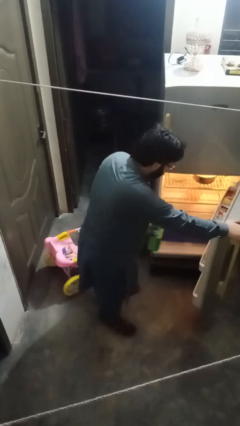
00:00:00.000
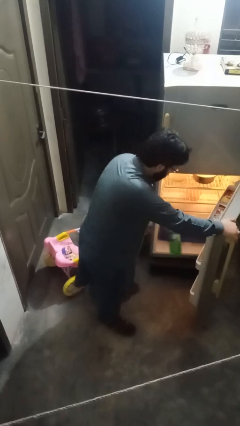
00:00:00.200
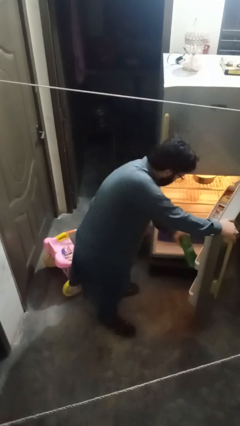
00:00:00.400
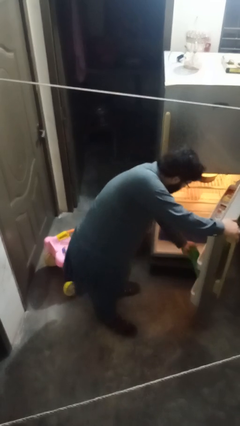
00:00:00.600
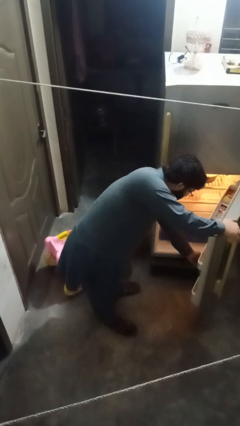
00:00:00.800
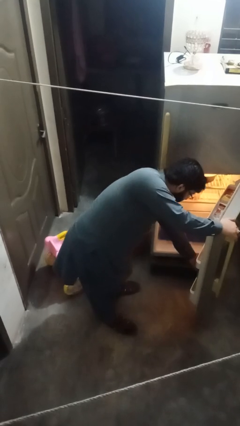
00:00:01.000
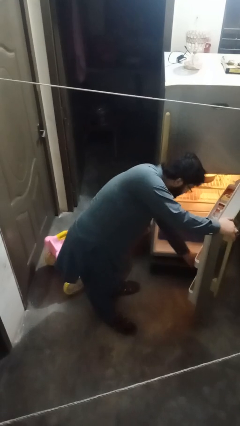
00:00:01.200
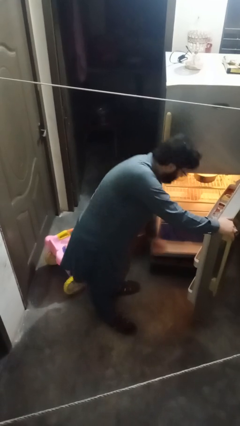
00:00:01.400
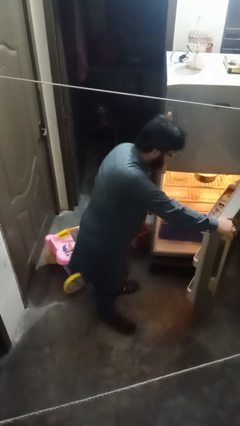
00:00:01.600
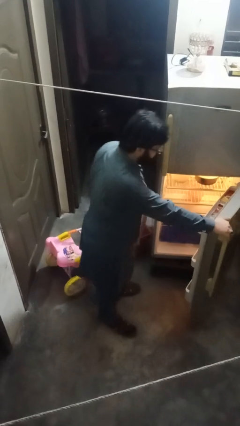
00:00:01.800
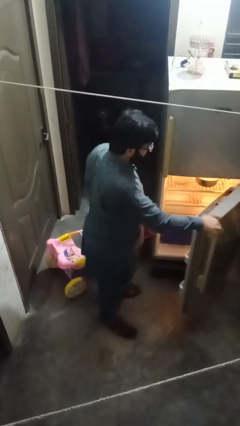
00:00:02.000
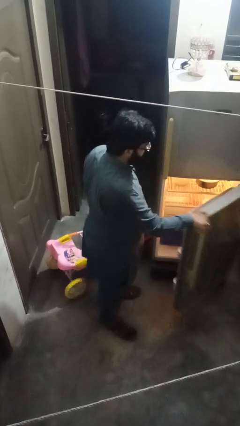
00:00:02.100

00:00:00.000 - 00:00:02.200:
person puts object into refrigerator

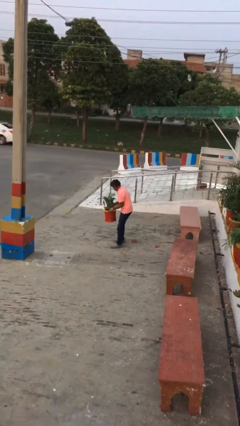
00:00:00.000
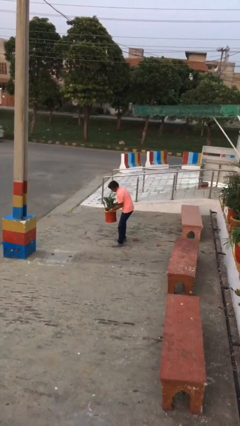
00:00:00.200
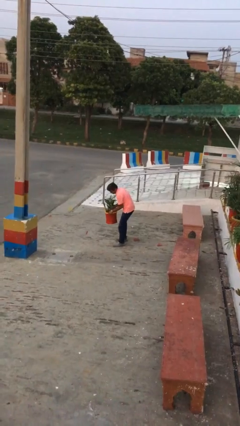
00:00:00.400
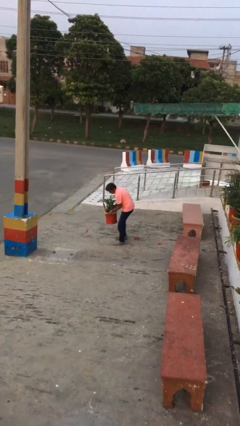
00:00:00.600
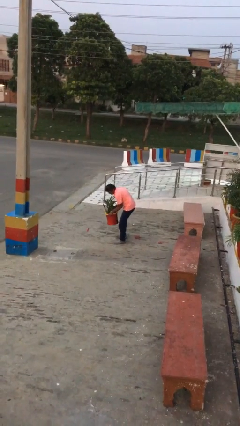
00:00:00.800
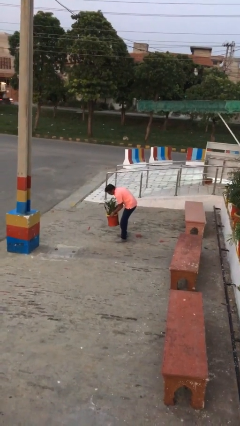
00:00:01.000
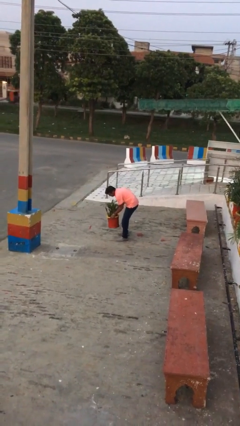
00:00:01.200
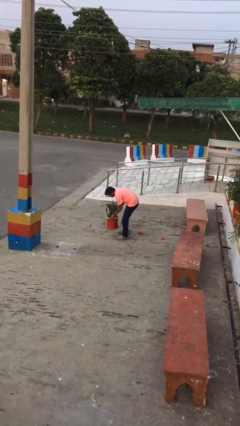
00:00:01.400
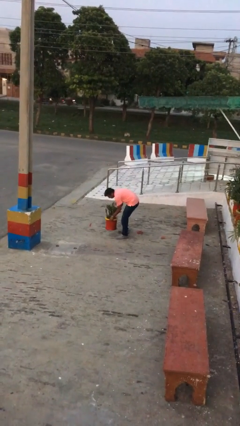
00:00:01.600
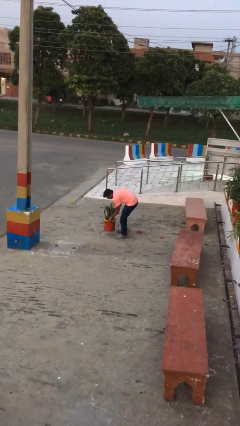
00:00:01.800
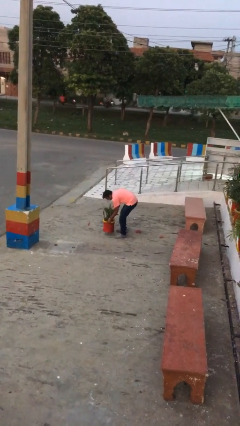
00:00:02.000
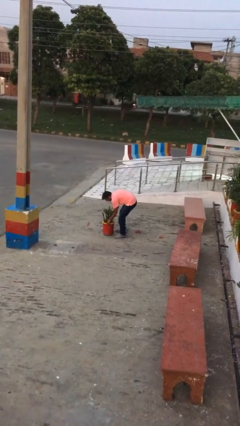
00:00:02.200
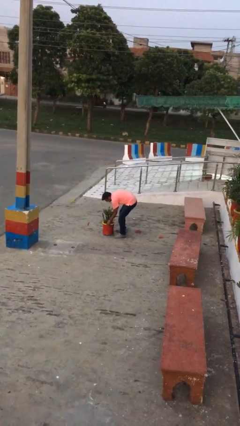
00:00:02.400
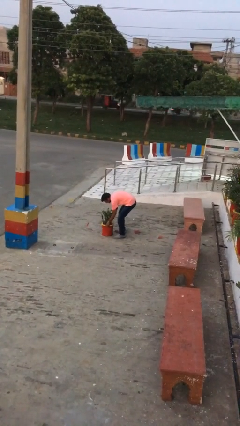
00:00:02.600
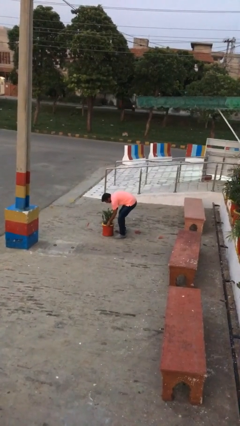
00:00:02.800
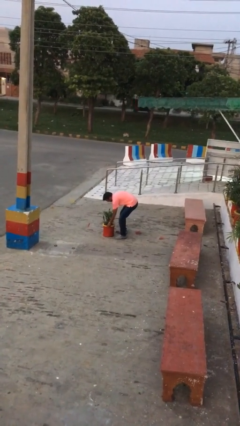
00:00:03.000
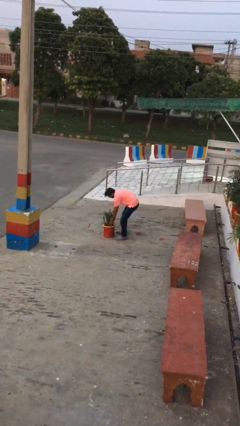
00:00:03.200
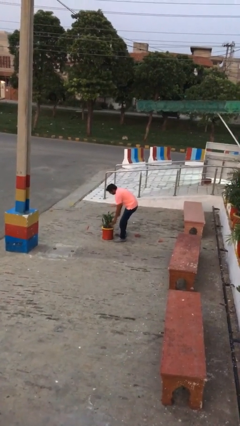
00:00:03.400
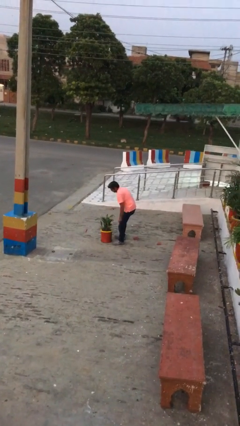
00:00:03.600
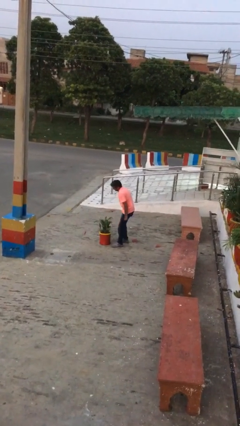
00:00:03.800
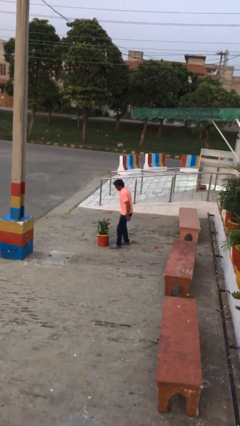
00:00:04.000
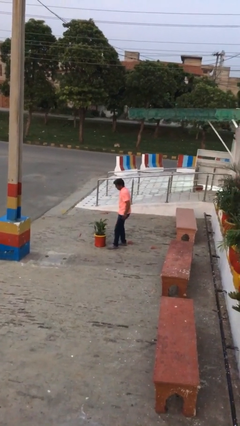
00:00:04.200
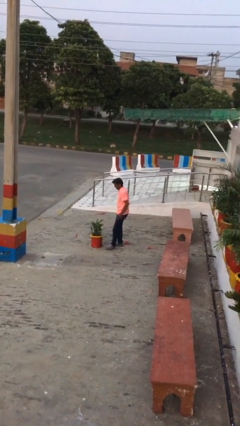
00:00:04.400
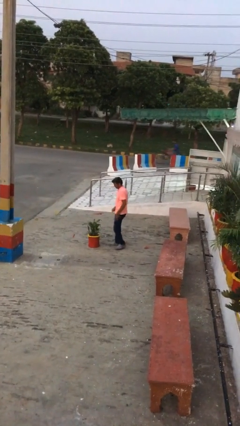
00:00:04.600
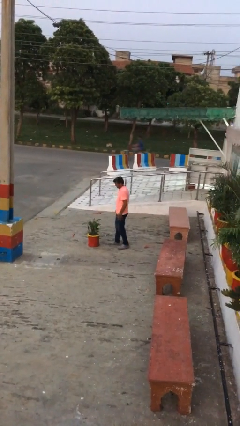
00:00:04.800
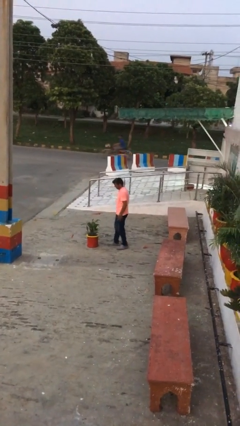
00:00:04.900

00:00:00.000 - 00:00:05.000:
person puts down object on floor

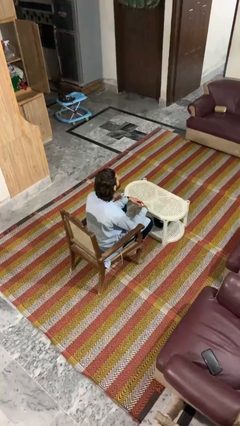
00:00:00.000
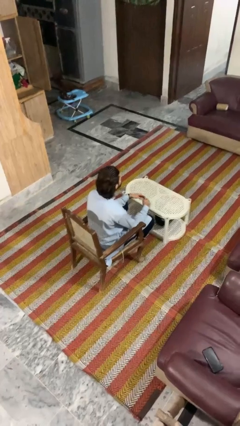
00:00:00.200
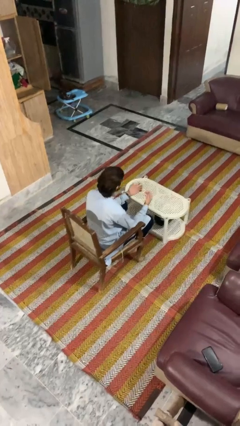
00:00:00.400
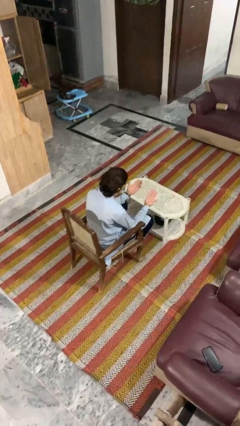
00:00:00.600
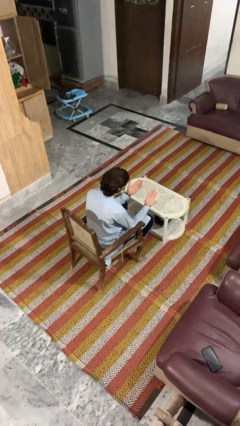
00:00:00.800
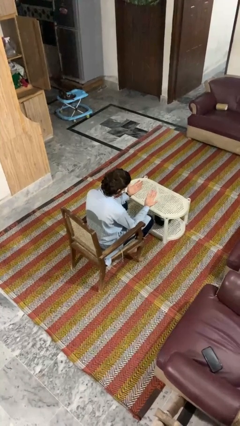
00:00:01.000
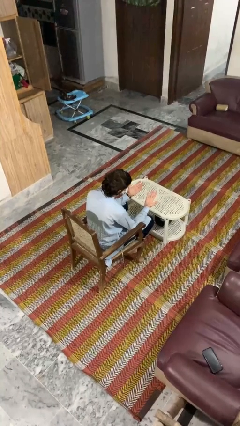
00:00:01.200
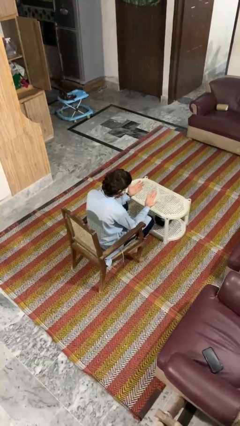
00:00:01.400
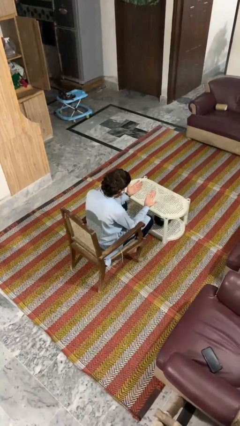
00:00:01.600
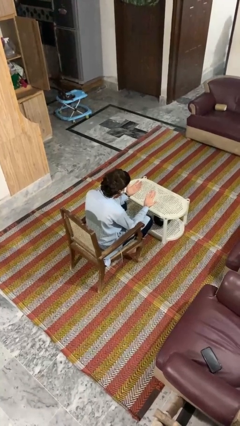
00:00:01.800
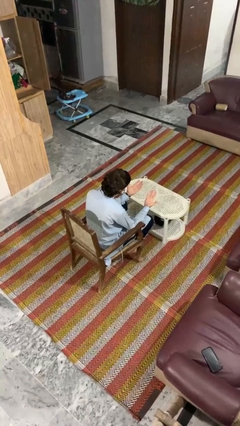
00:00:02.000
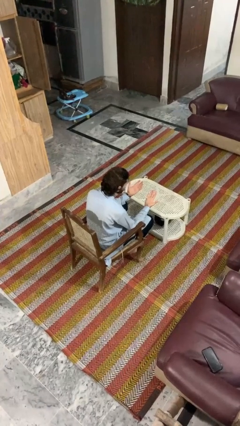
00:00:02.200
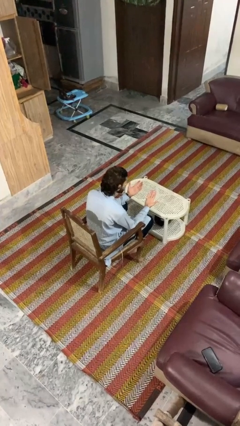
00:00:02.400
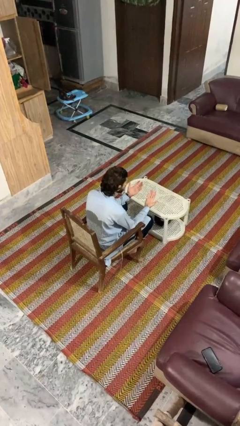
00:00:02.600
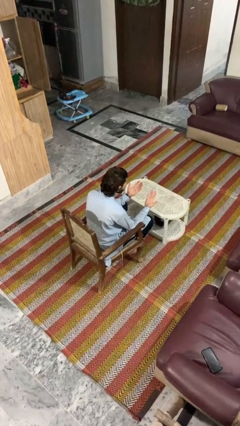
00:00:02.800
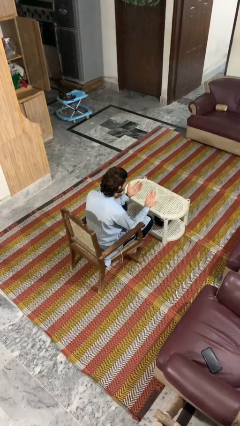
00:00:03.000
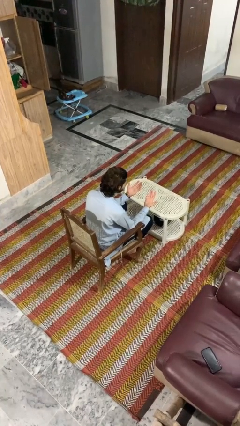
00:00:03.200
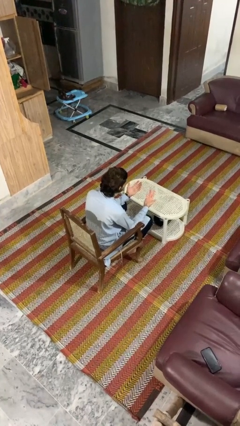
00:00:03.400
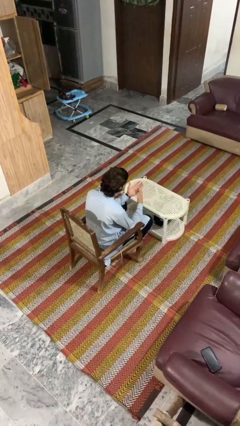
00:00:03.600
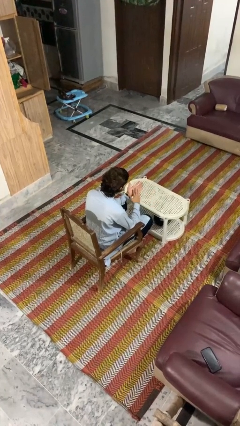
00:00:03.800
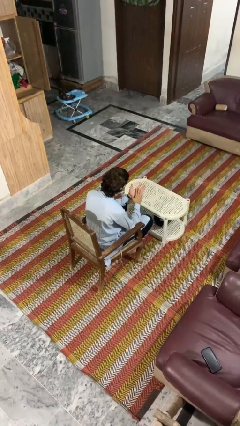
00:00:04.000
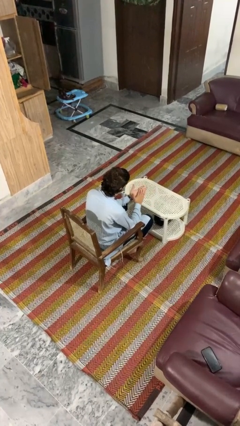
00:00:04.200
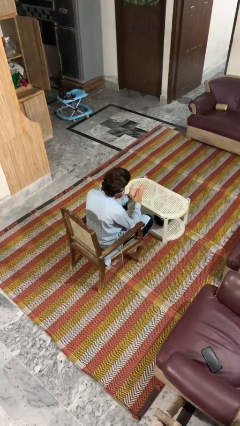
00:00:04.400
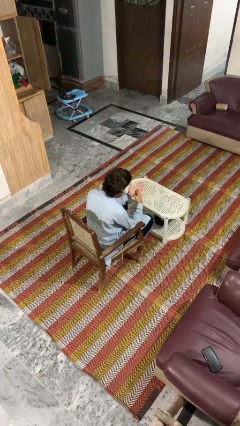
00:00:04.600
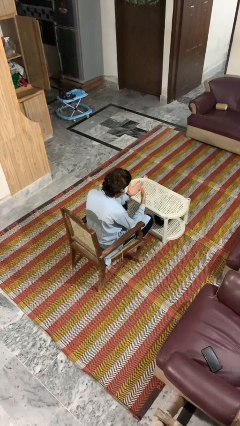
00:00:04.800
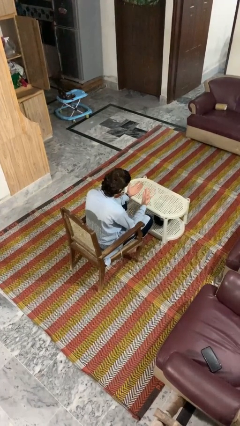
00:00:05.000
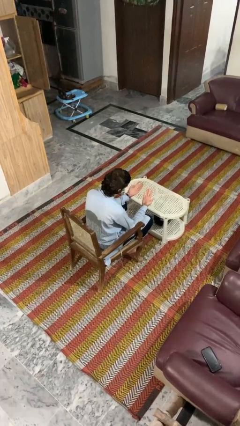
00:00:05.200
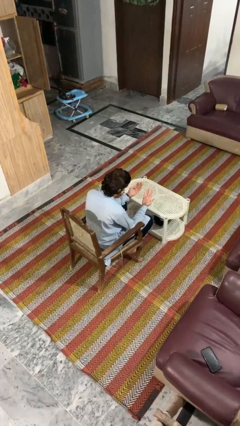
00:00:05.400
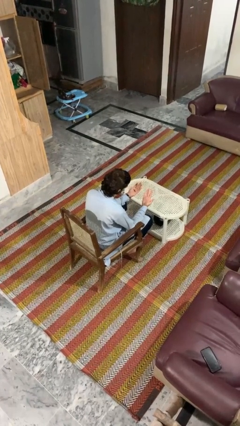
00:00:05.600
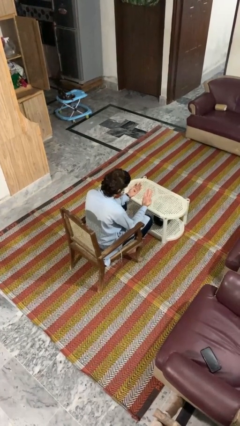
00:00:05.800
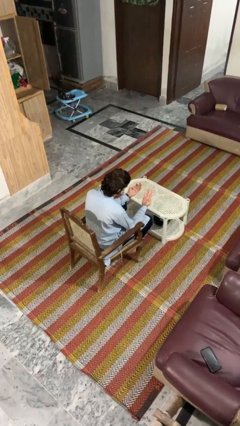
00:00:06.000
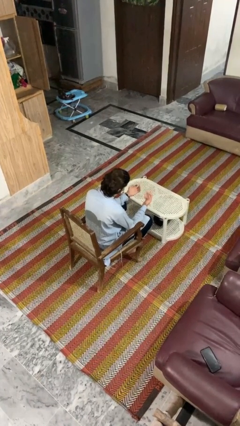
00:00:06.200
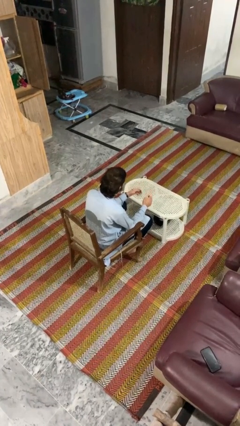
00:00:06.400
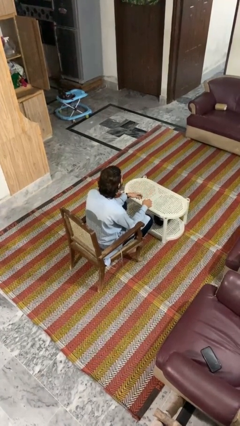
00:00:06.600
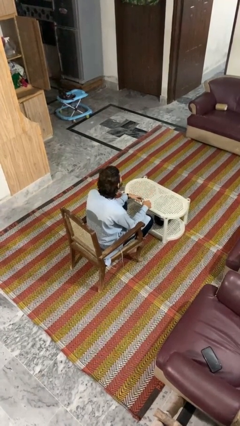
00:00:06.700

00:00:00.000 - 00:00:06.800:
person looks at hands in lap

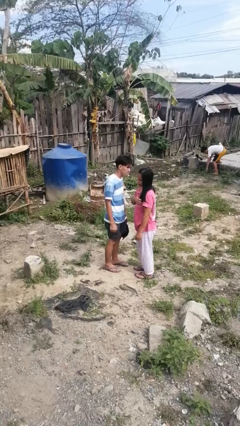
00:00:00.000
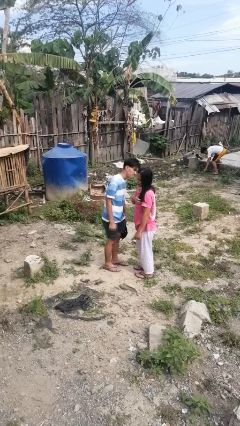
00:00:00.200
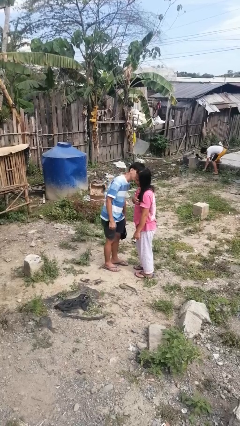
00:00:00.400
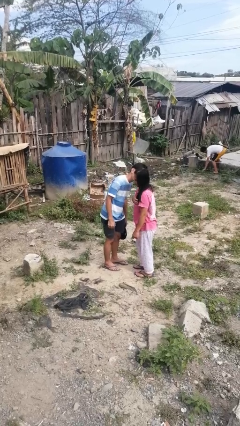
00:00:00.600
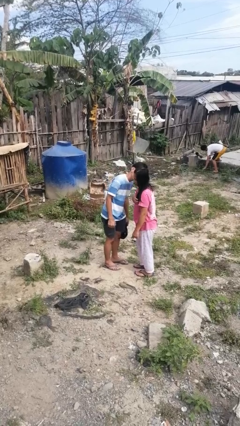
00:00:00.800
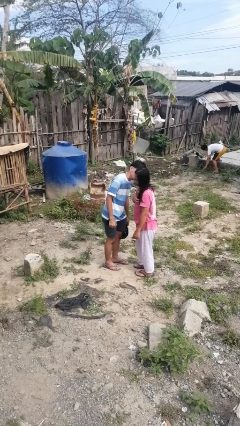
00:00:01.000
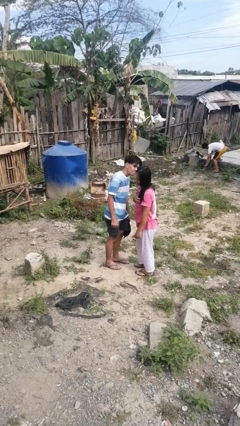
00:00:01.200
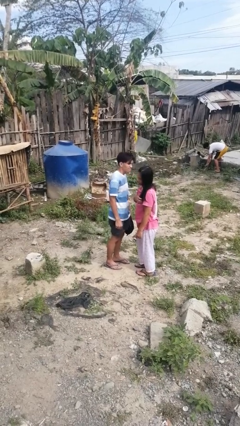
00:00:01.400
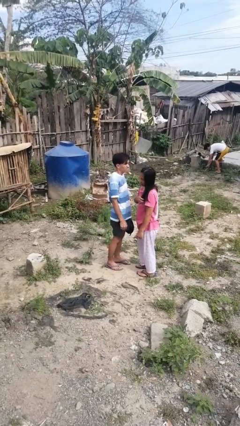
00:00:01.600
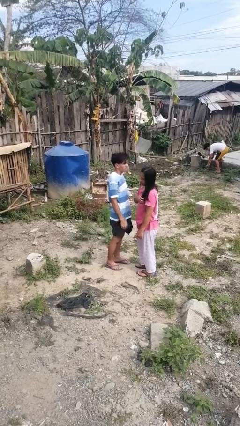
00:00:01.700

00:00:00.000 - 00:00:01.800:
person kisses cheek of person

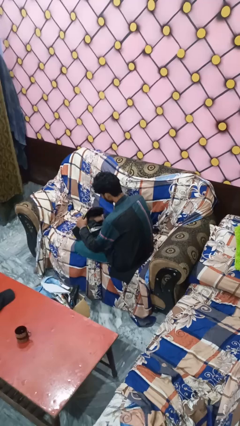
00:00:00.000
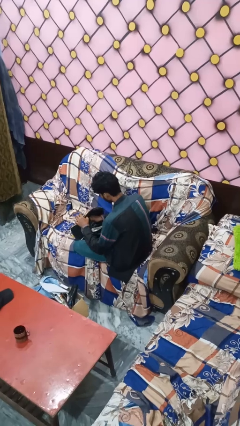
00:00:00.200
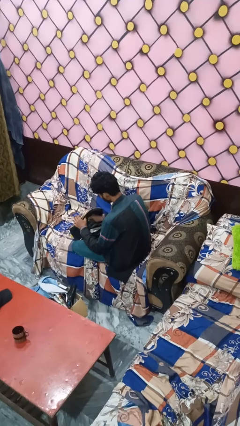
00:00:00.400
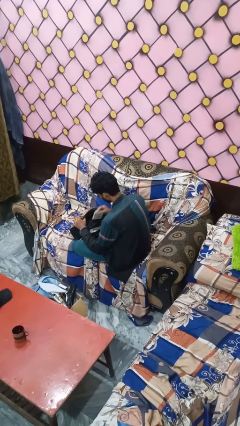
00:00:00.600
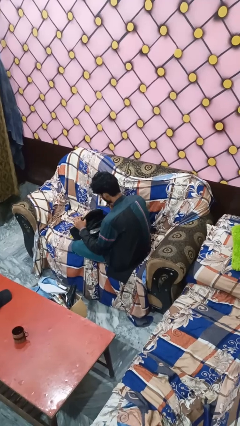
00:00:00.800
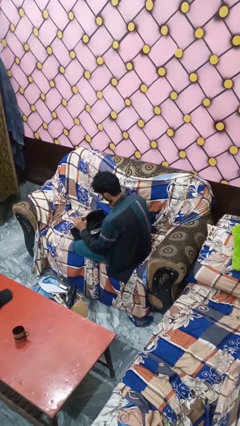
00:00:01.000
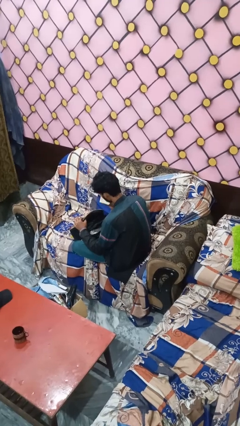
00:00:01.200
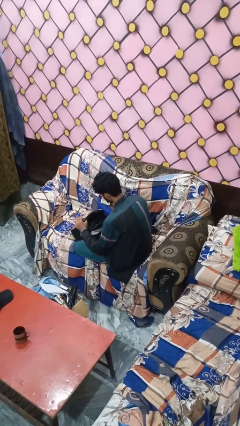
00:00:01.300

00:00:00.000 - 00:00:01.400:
person searches in bag

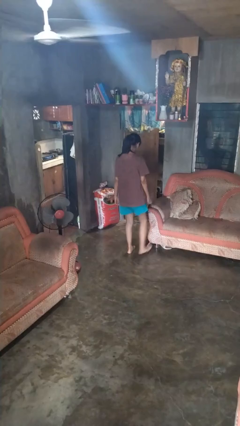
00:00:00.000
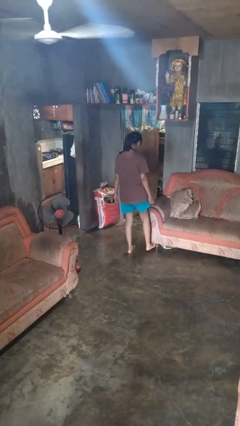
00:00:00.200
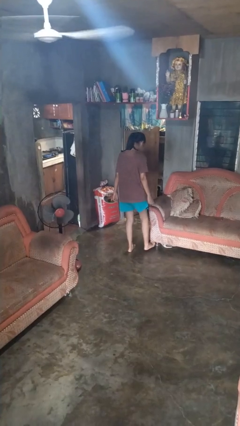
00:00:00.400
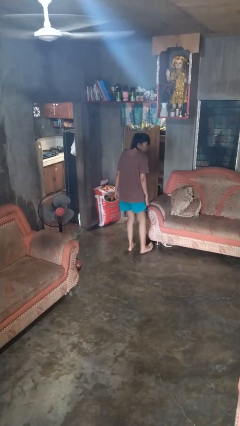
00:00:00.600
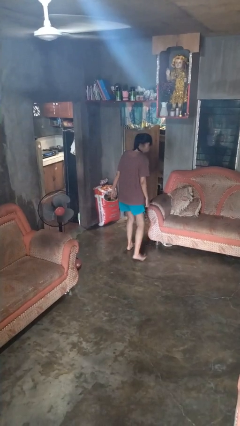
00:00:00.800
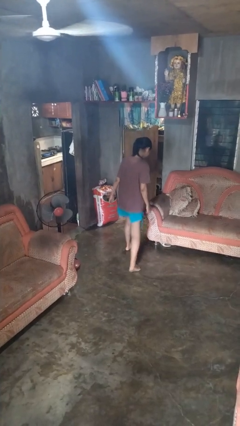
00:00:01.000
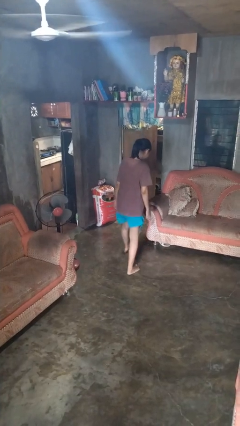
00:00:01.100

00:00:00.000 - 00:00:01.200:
person stubs toe
